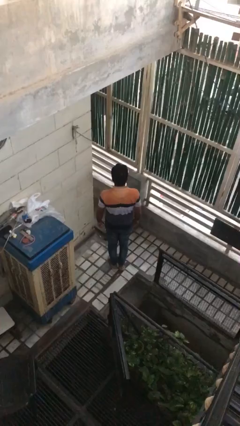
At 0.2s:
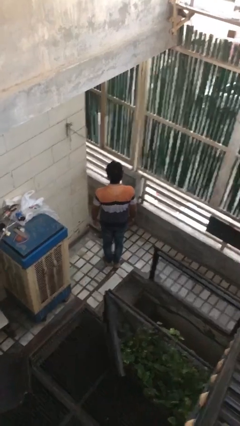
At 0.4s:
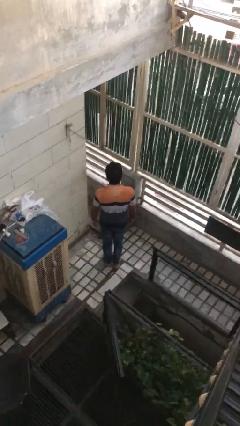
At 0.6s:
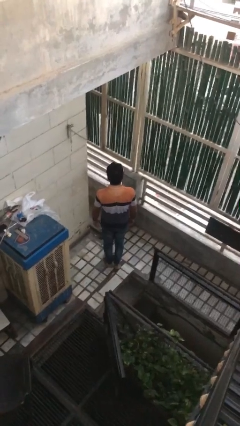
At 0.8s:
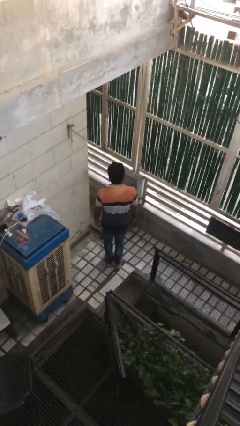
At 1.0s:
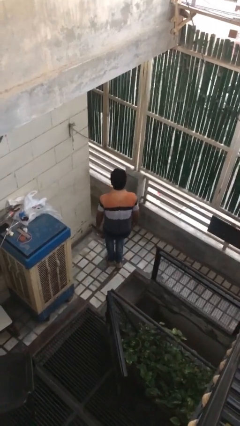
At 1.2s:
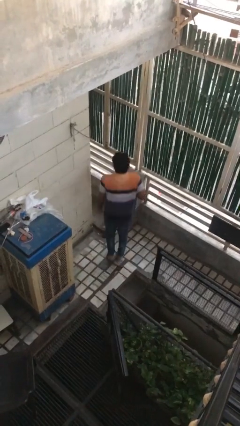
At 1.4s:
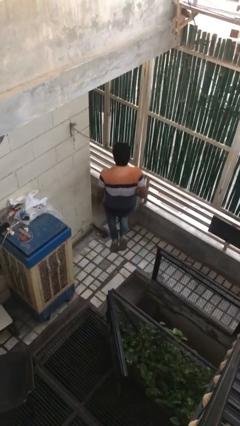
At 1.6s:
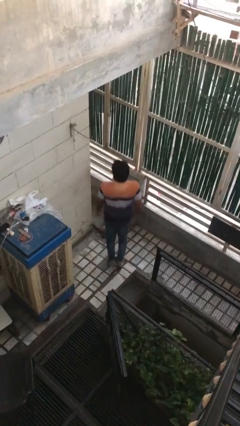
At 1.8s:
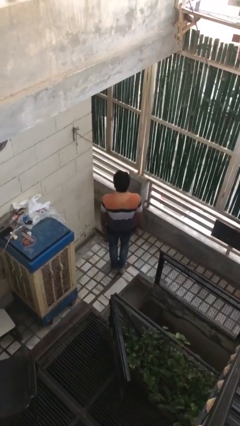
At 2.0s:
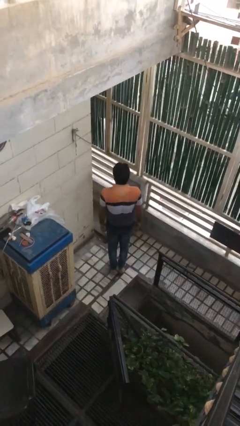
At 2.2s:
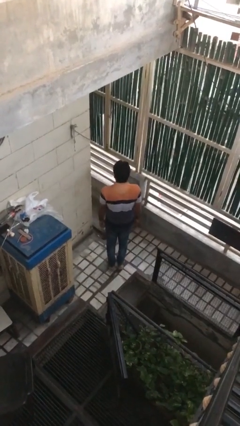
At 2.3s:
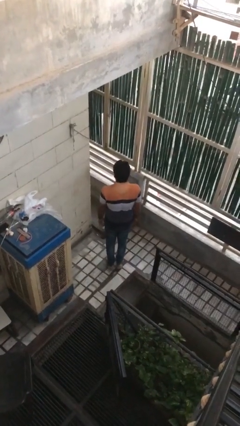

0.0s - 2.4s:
person jumps

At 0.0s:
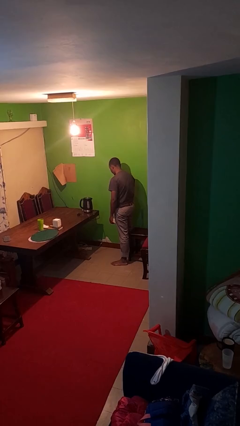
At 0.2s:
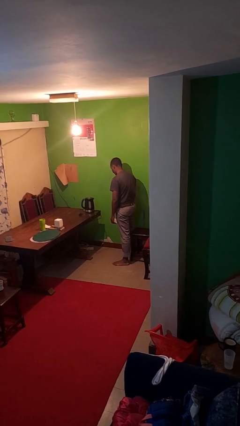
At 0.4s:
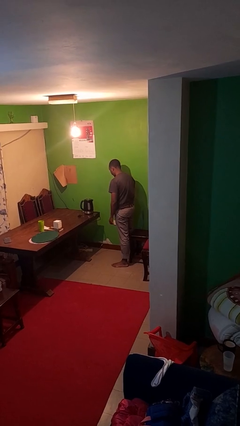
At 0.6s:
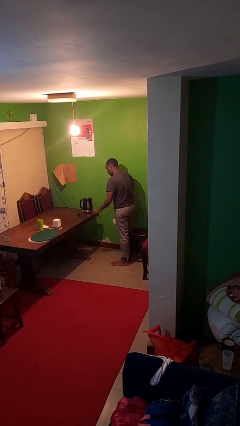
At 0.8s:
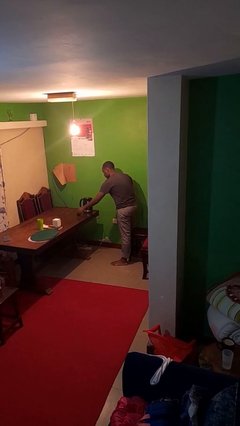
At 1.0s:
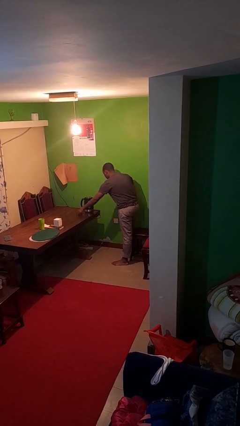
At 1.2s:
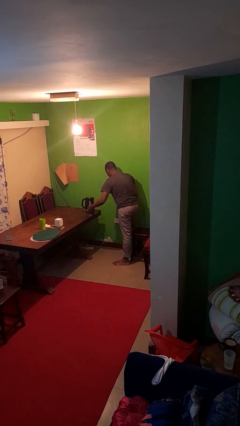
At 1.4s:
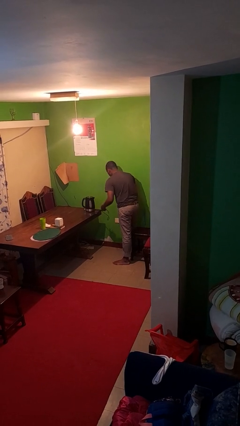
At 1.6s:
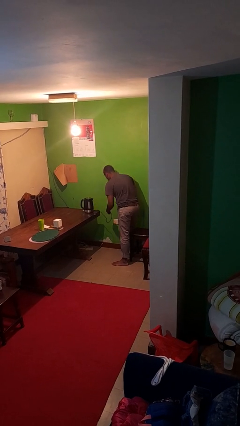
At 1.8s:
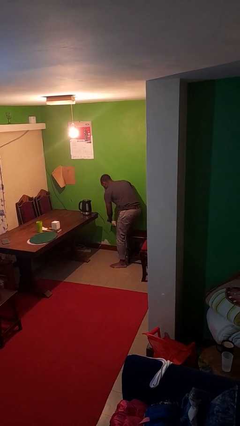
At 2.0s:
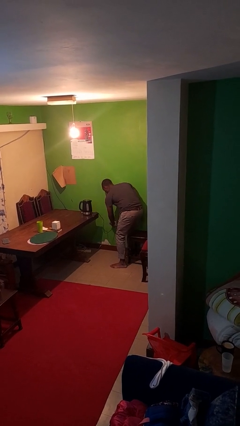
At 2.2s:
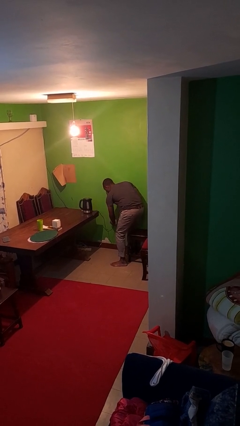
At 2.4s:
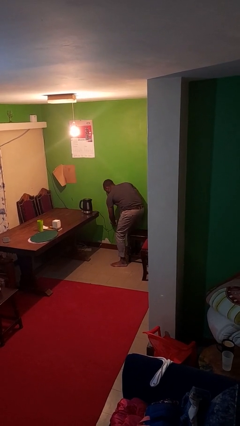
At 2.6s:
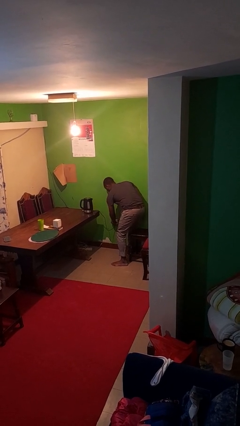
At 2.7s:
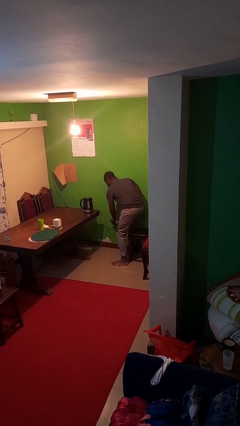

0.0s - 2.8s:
person plugs into electrical socket

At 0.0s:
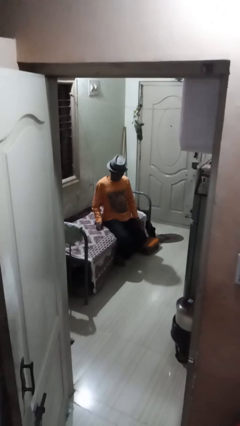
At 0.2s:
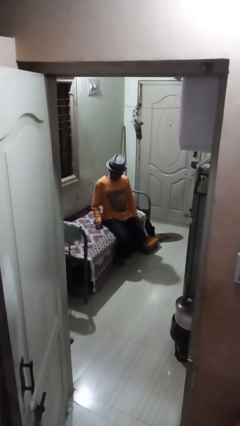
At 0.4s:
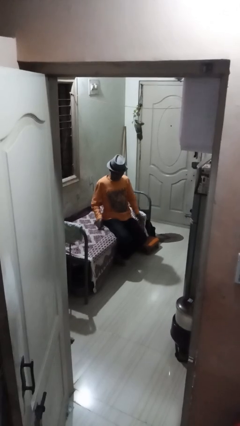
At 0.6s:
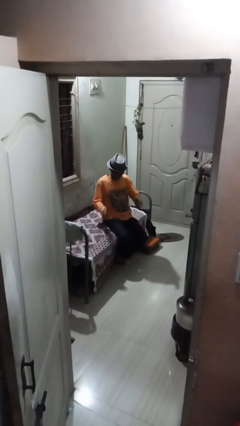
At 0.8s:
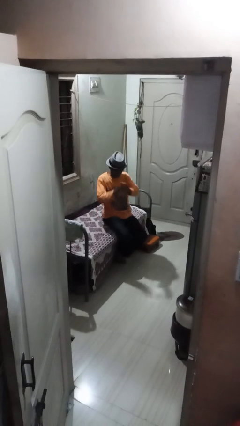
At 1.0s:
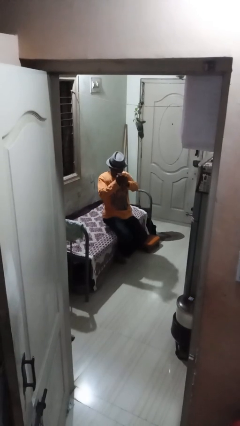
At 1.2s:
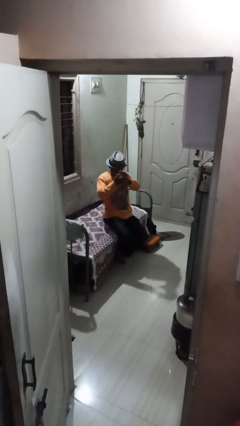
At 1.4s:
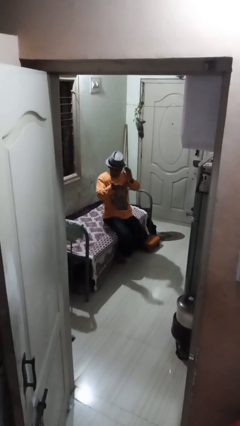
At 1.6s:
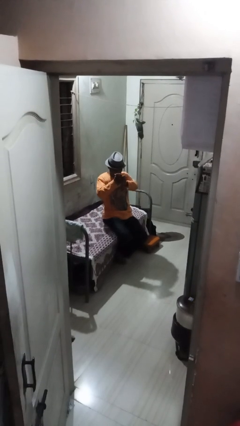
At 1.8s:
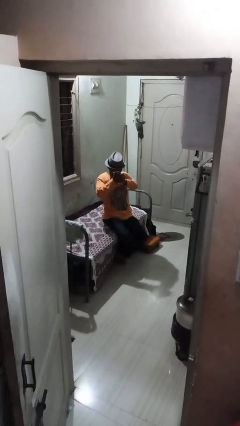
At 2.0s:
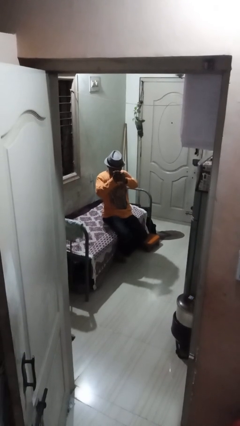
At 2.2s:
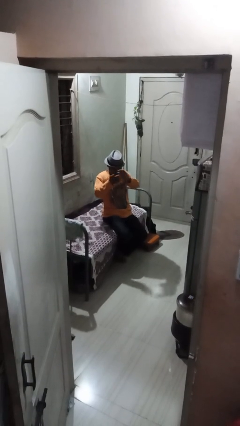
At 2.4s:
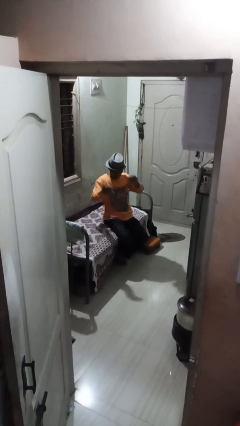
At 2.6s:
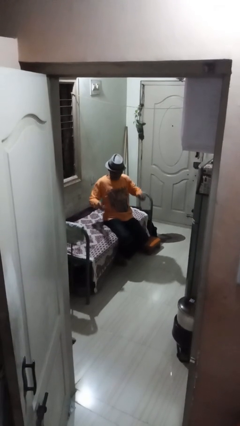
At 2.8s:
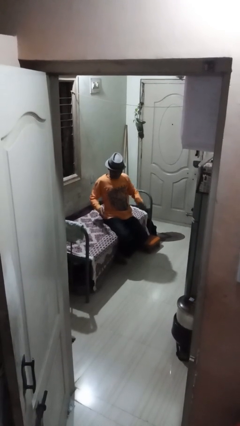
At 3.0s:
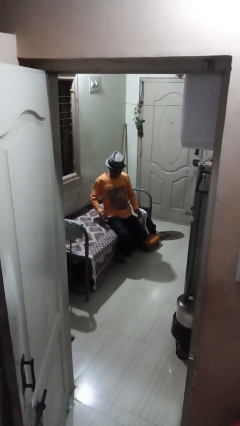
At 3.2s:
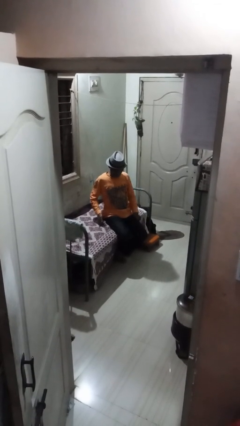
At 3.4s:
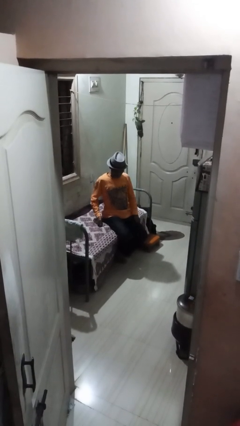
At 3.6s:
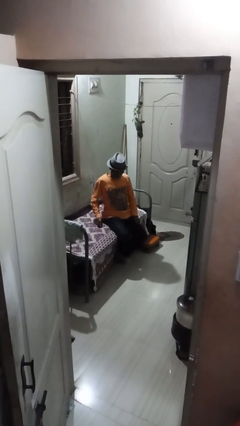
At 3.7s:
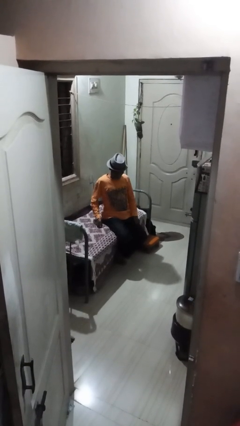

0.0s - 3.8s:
person claps hands

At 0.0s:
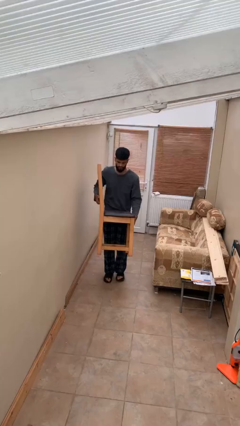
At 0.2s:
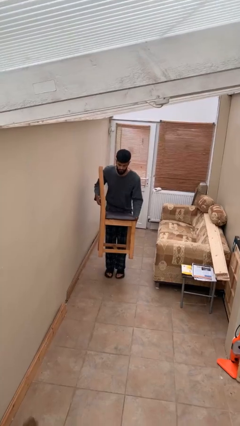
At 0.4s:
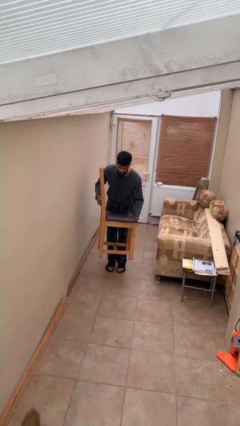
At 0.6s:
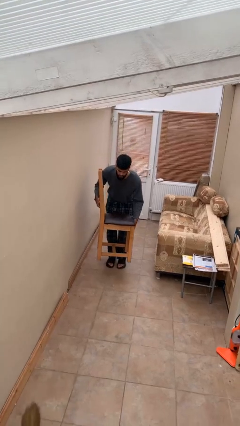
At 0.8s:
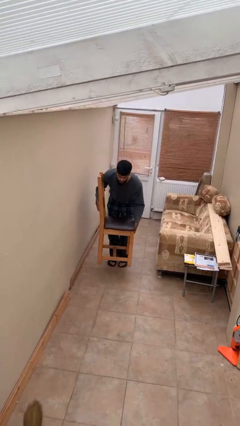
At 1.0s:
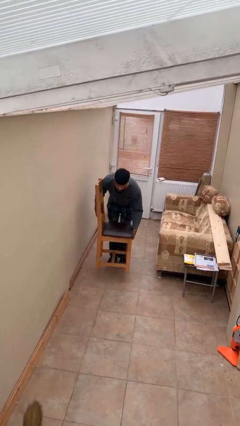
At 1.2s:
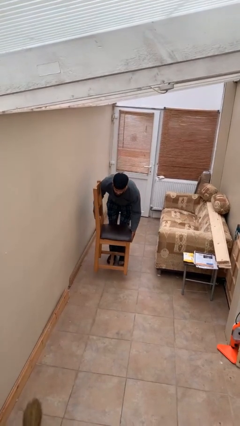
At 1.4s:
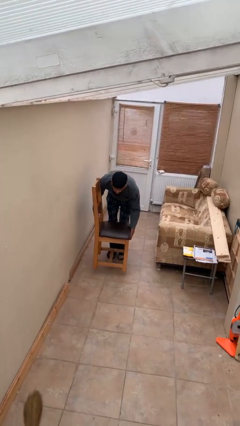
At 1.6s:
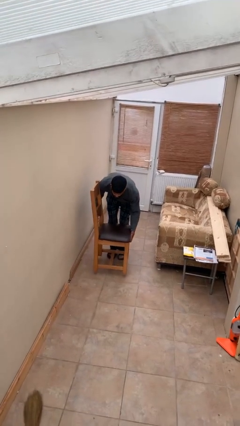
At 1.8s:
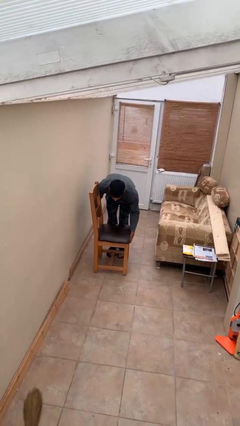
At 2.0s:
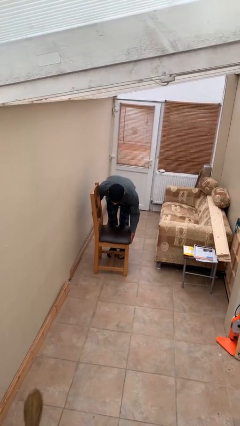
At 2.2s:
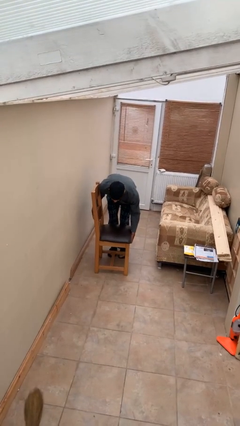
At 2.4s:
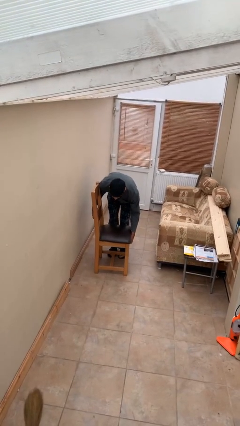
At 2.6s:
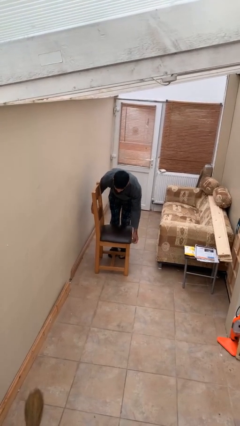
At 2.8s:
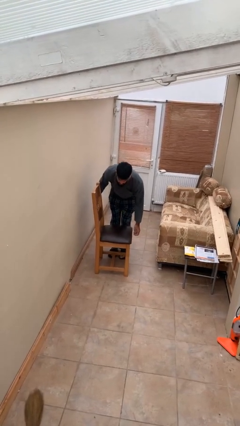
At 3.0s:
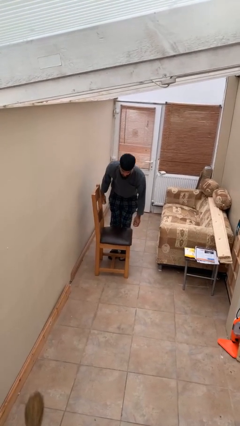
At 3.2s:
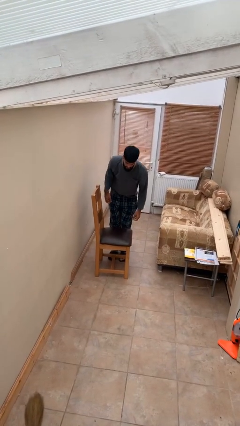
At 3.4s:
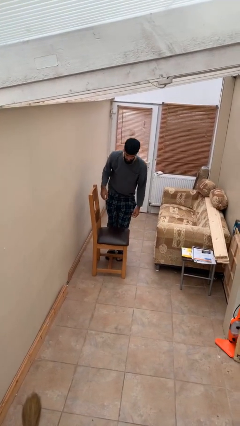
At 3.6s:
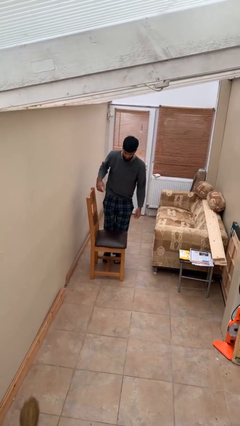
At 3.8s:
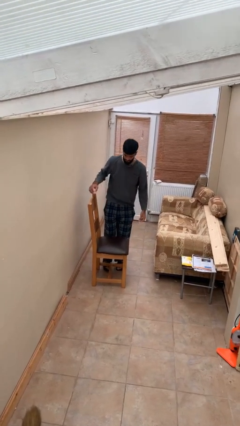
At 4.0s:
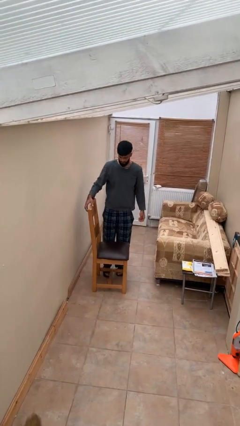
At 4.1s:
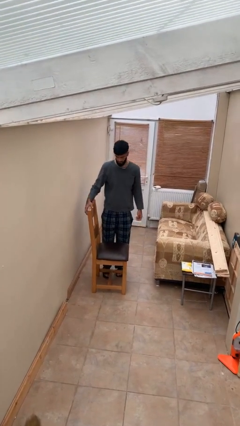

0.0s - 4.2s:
person puts down object on floor

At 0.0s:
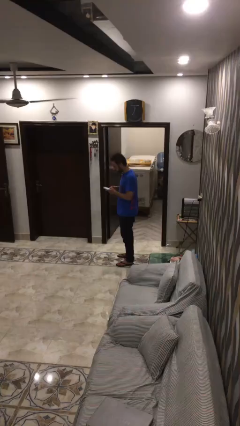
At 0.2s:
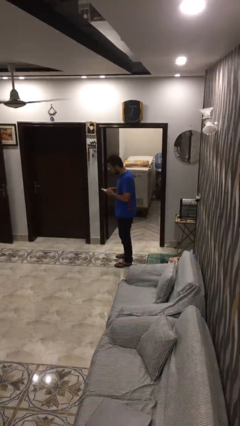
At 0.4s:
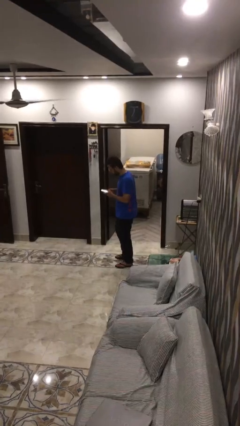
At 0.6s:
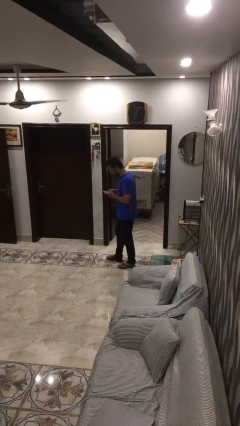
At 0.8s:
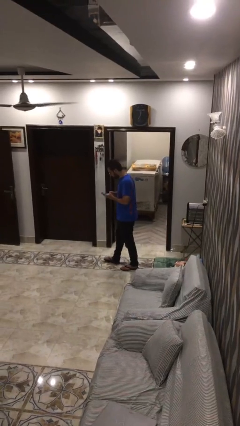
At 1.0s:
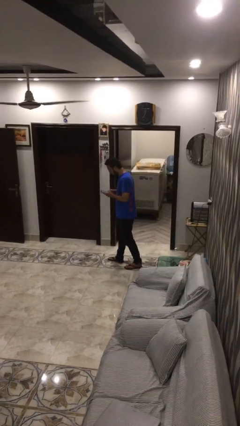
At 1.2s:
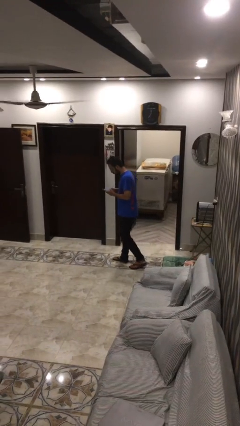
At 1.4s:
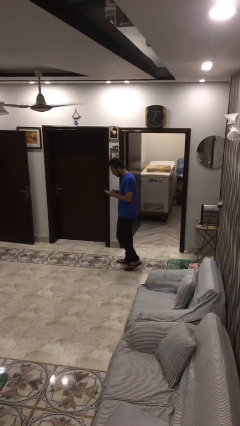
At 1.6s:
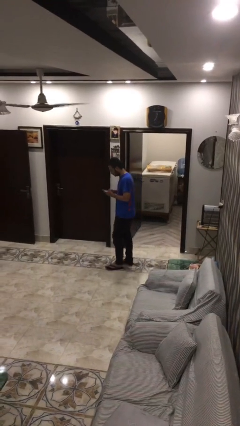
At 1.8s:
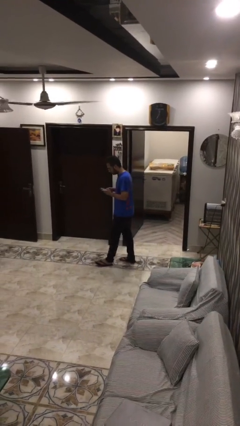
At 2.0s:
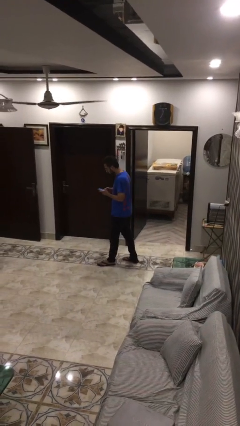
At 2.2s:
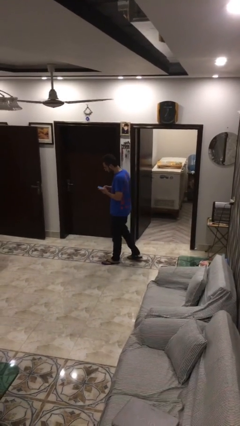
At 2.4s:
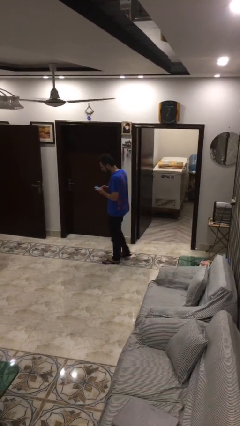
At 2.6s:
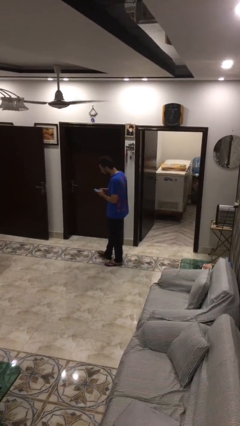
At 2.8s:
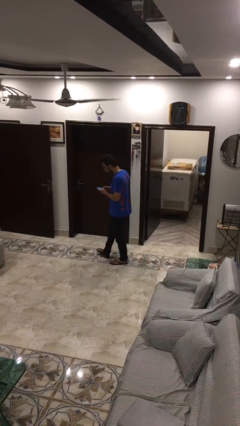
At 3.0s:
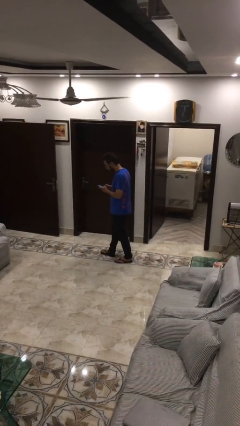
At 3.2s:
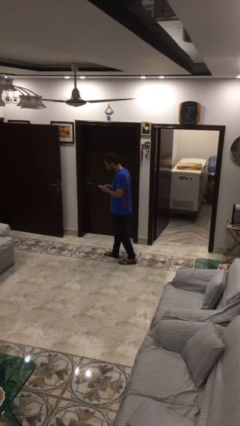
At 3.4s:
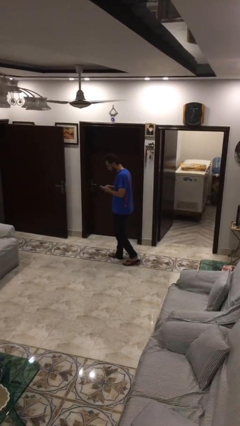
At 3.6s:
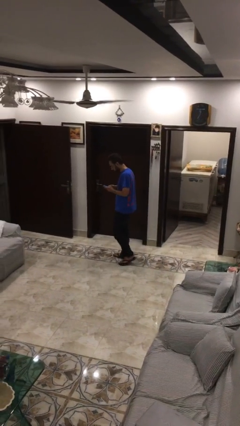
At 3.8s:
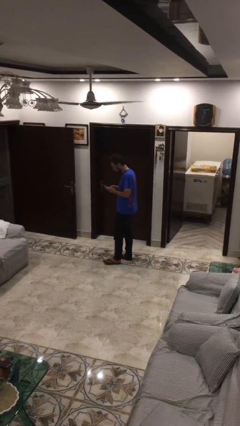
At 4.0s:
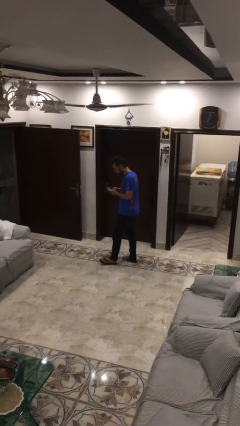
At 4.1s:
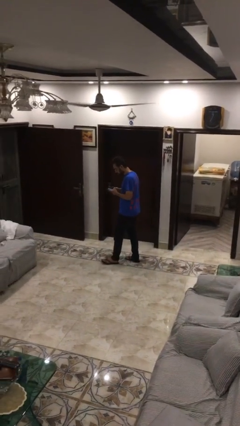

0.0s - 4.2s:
person texts on phone

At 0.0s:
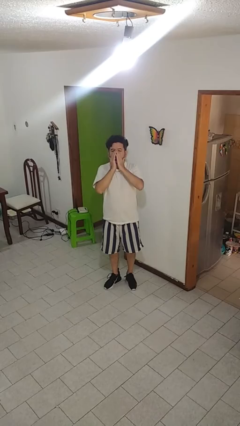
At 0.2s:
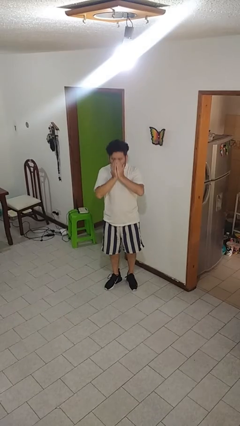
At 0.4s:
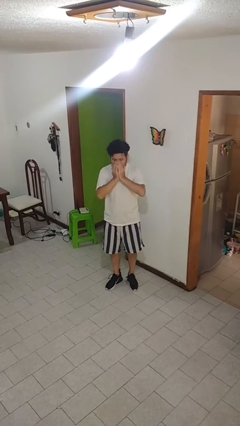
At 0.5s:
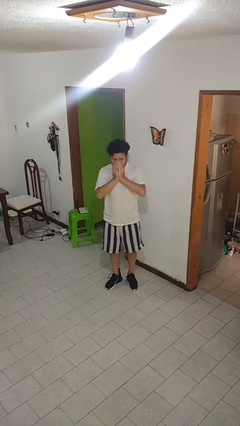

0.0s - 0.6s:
person sneezes into hand
